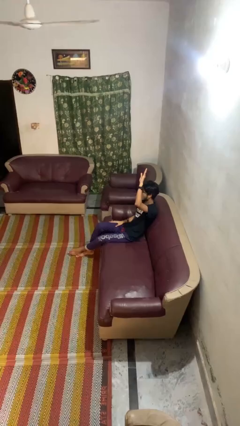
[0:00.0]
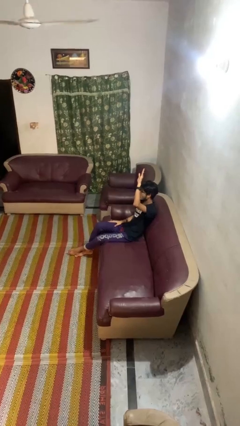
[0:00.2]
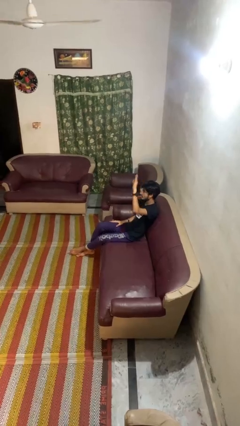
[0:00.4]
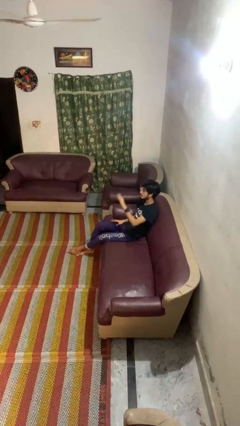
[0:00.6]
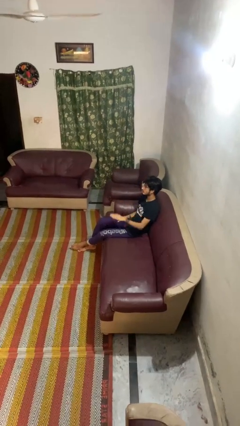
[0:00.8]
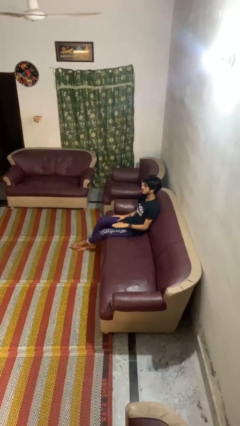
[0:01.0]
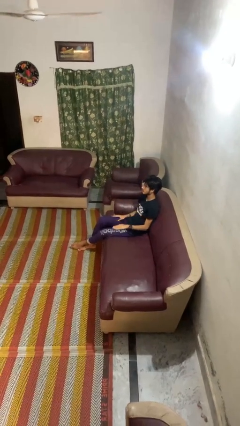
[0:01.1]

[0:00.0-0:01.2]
person gestures lower hand

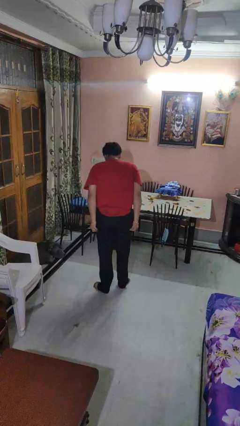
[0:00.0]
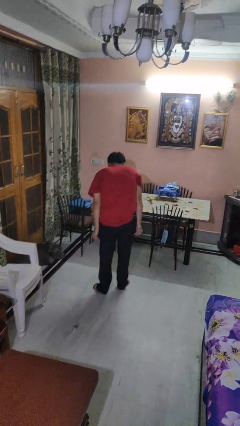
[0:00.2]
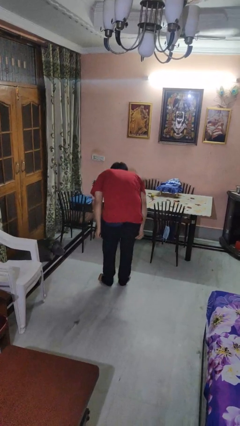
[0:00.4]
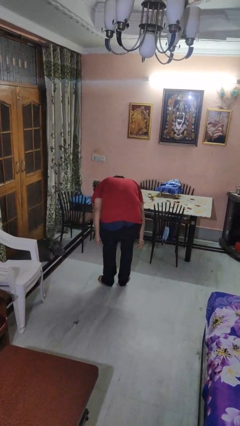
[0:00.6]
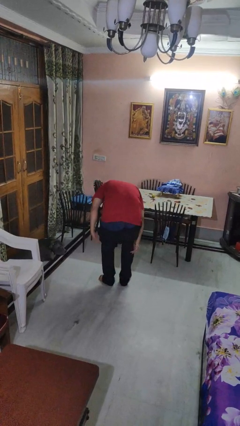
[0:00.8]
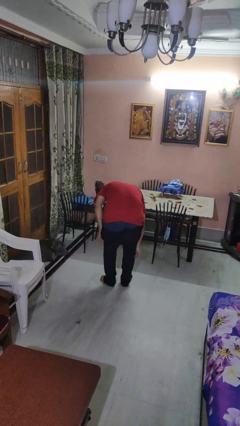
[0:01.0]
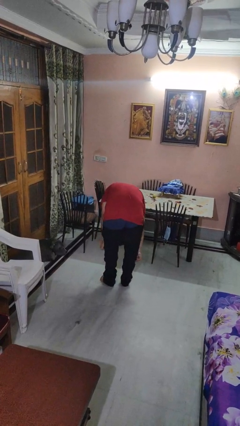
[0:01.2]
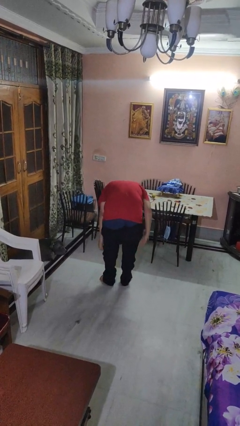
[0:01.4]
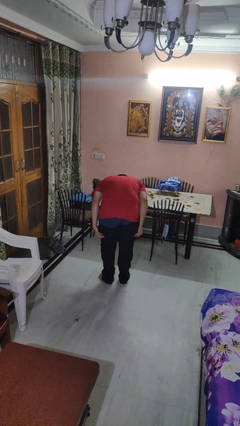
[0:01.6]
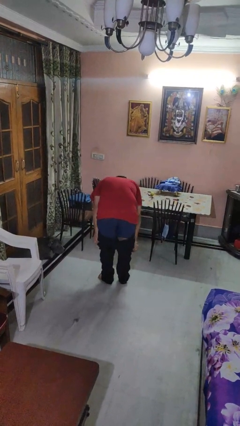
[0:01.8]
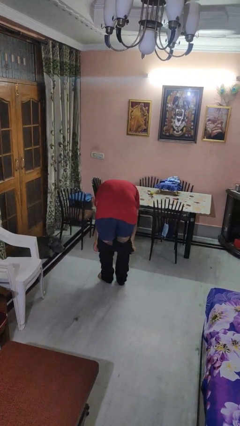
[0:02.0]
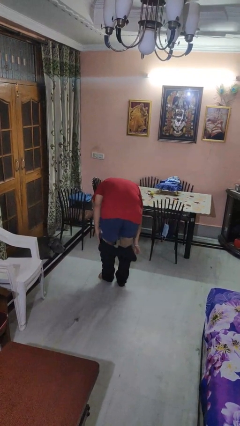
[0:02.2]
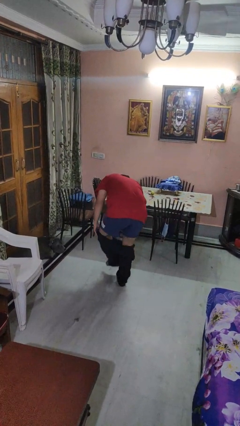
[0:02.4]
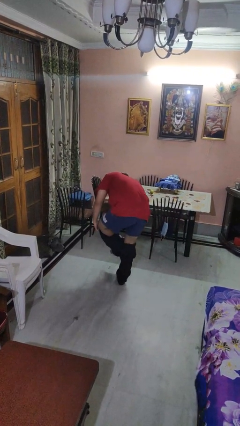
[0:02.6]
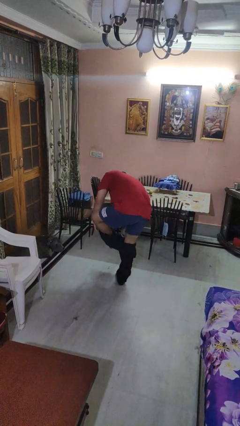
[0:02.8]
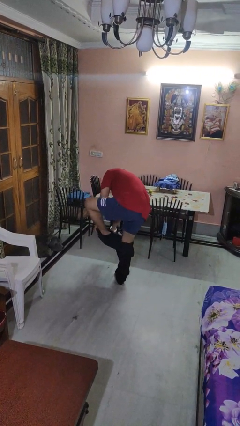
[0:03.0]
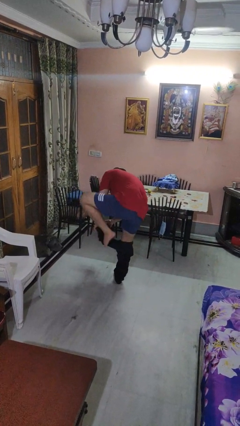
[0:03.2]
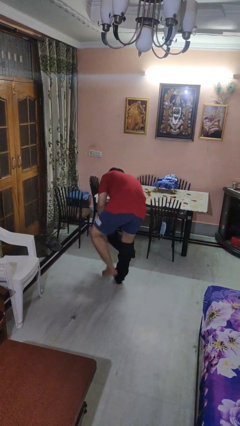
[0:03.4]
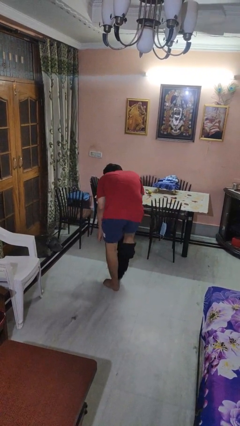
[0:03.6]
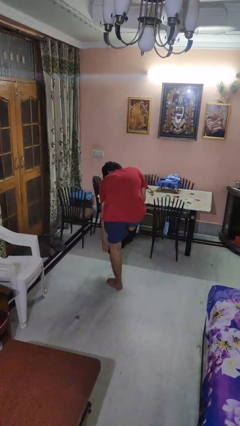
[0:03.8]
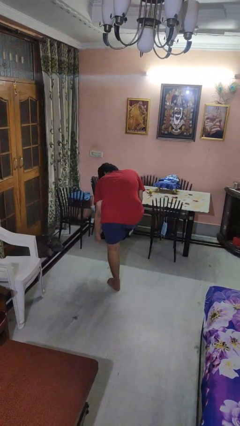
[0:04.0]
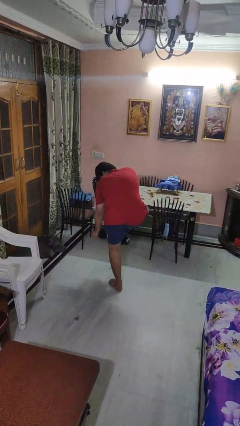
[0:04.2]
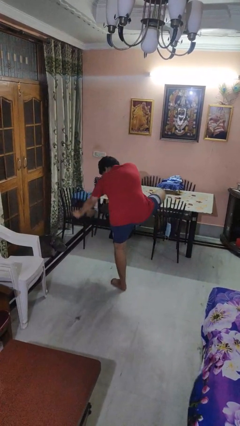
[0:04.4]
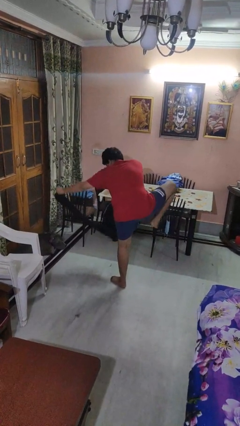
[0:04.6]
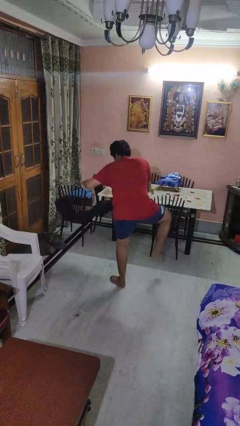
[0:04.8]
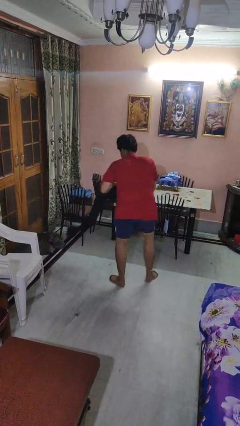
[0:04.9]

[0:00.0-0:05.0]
person takes off pants

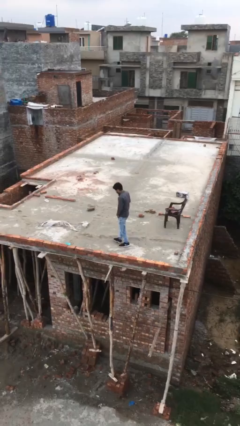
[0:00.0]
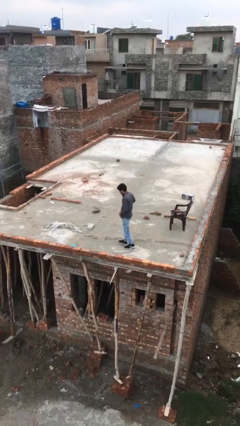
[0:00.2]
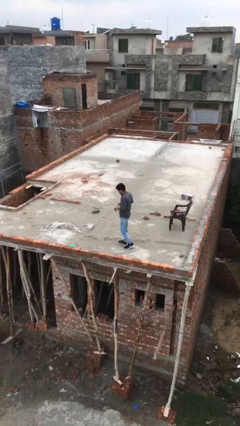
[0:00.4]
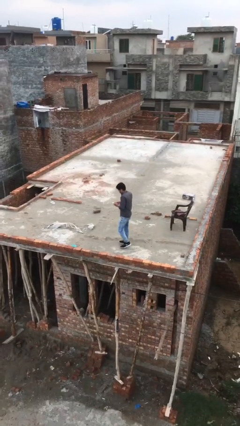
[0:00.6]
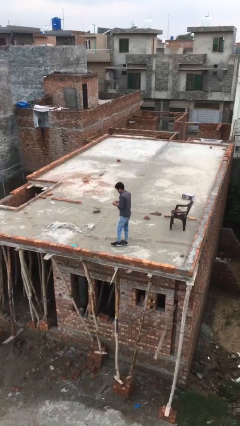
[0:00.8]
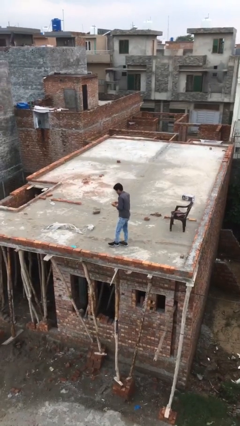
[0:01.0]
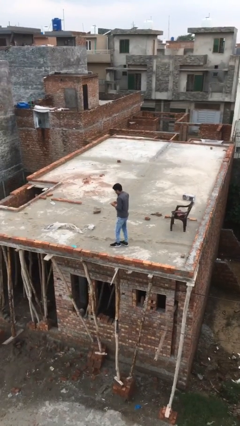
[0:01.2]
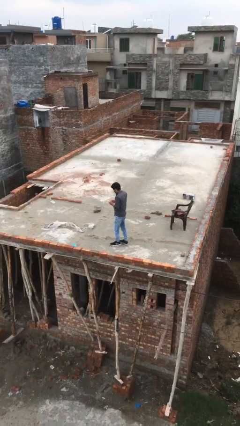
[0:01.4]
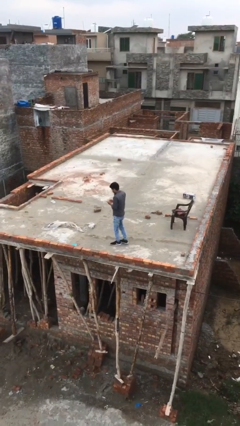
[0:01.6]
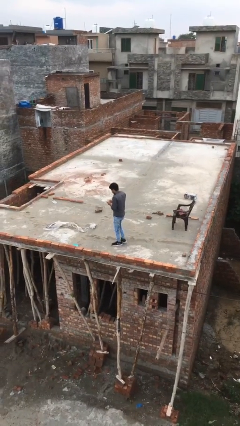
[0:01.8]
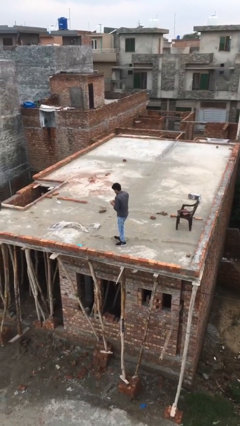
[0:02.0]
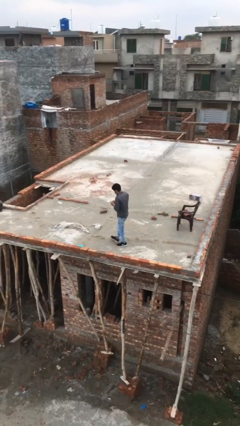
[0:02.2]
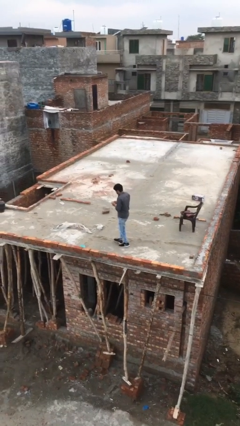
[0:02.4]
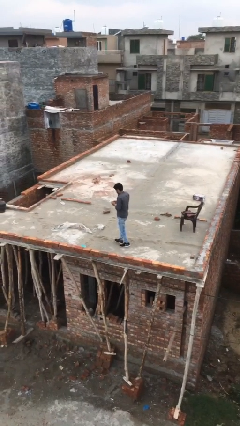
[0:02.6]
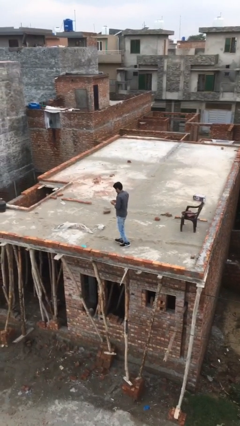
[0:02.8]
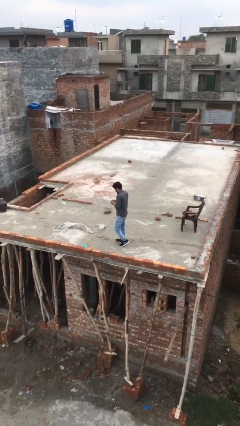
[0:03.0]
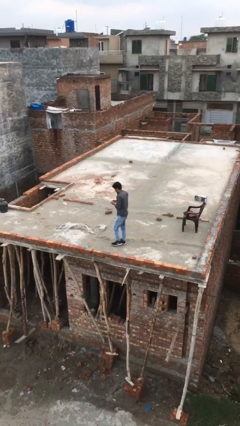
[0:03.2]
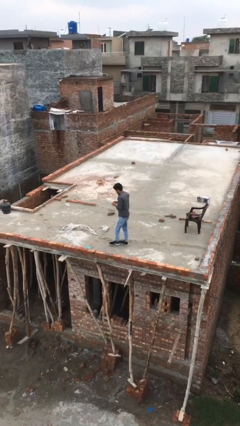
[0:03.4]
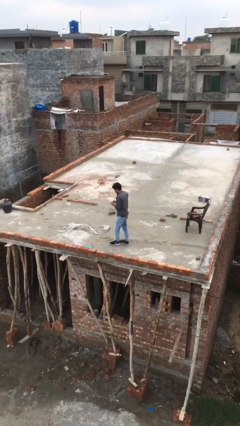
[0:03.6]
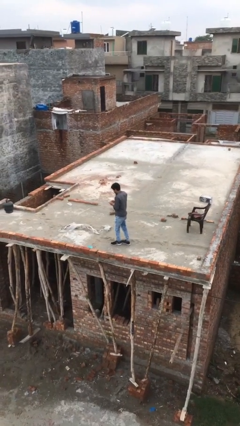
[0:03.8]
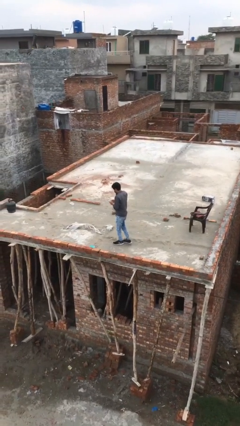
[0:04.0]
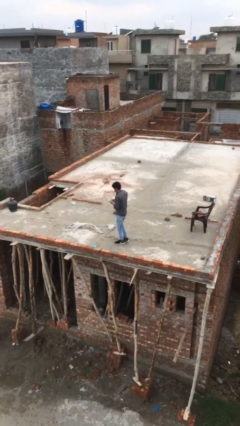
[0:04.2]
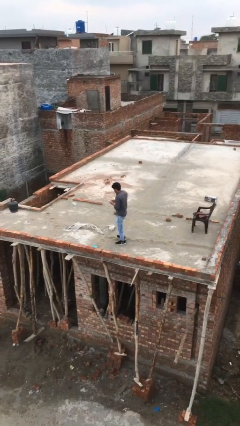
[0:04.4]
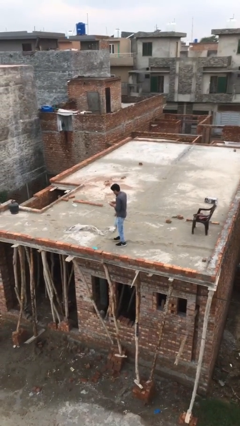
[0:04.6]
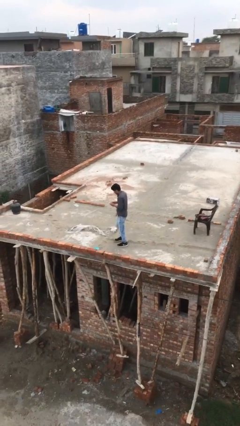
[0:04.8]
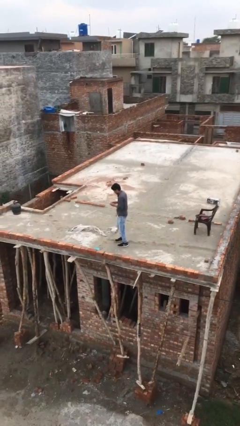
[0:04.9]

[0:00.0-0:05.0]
person texts on phone

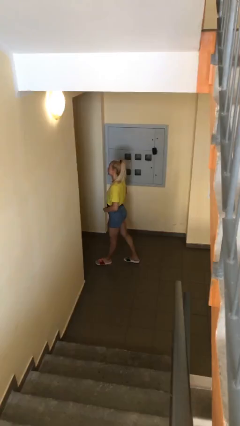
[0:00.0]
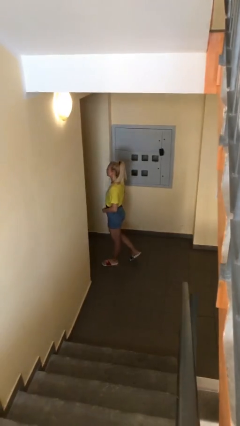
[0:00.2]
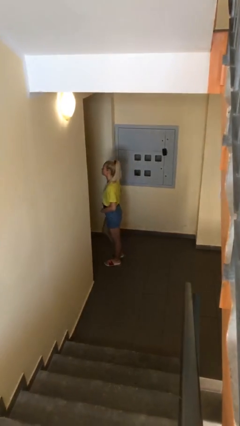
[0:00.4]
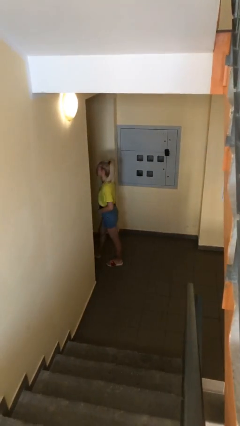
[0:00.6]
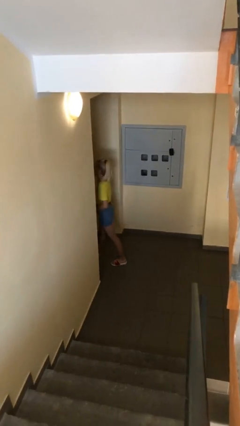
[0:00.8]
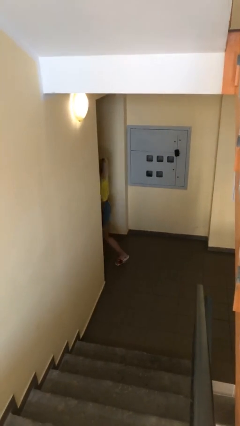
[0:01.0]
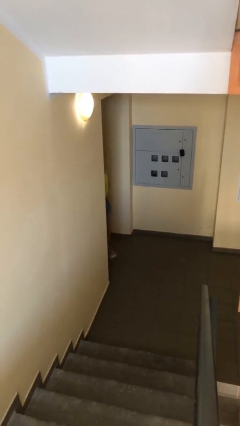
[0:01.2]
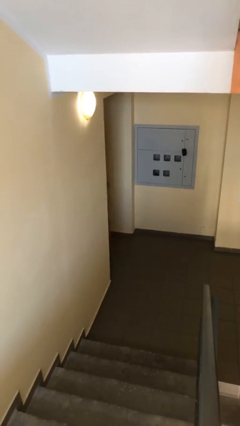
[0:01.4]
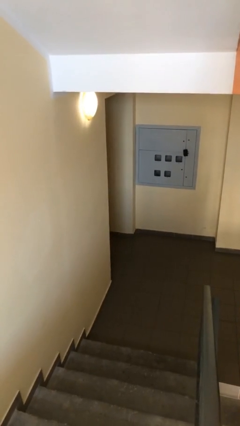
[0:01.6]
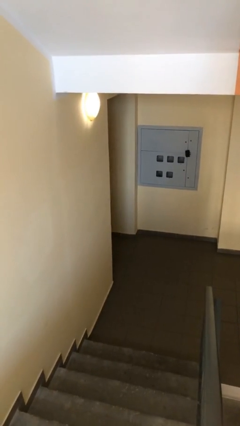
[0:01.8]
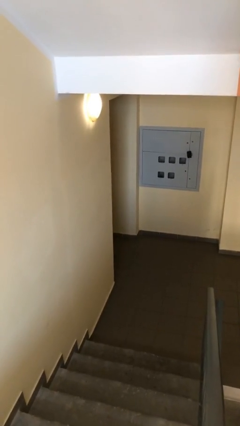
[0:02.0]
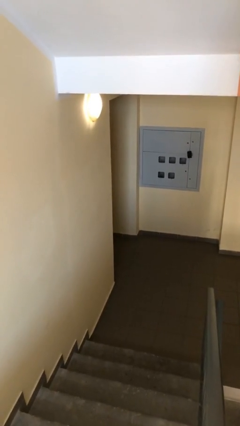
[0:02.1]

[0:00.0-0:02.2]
person exits scene through structure

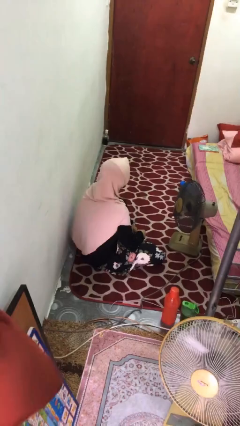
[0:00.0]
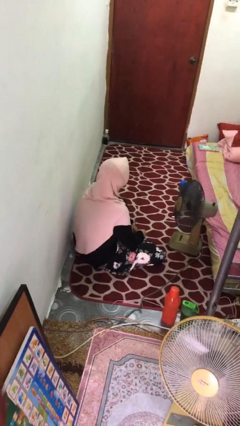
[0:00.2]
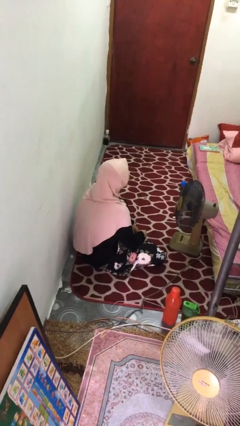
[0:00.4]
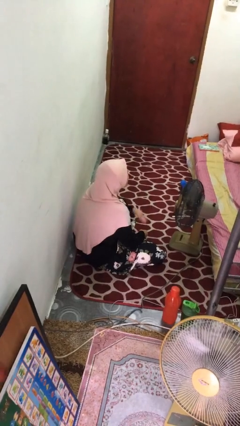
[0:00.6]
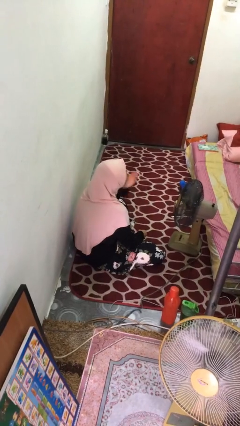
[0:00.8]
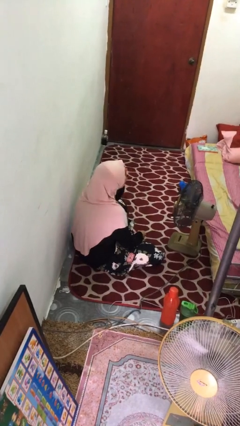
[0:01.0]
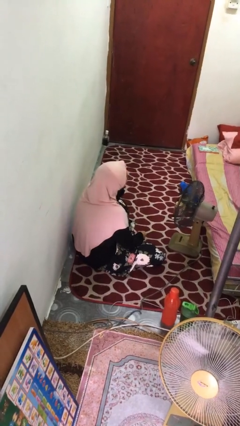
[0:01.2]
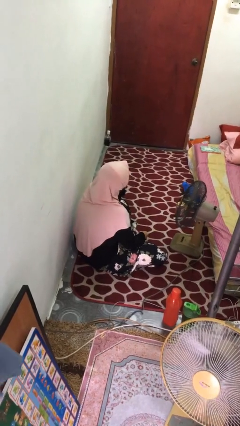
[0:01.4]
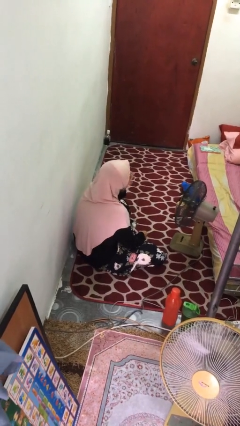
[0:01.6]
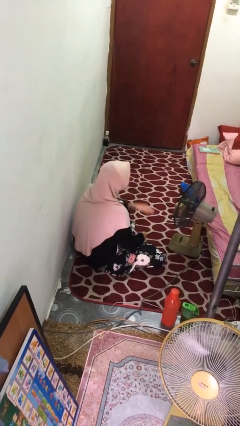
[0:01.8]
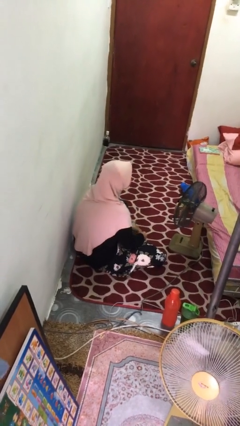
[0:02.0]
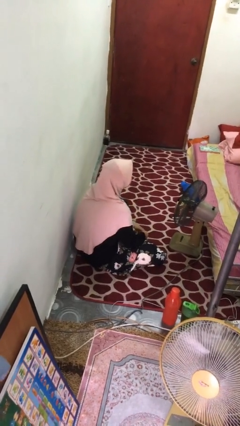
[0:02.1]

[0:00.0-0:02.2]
person yawns

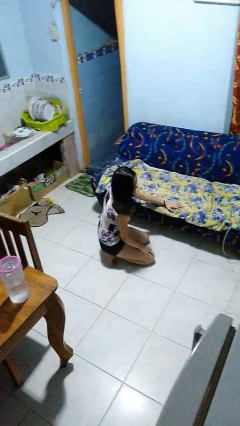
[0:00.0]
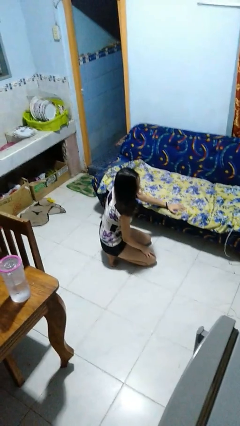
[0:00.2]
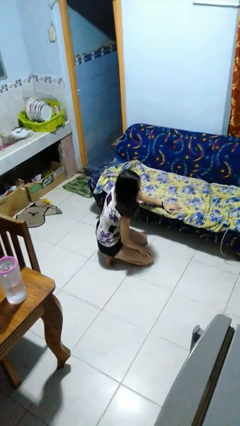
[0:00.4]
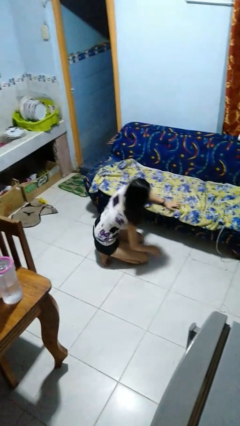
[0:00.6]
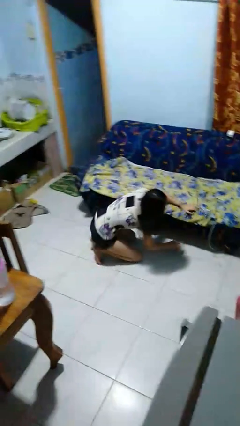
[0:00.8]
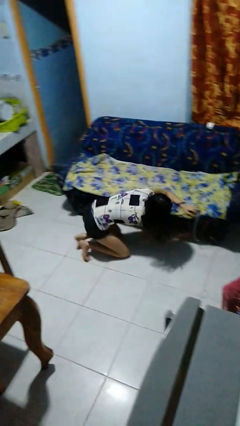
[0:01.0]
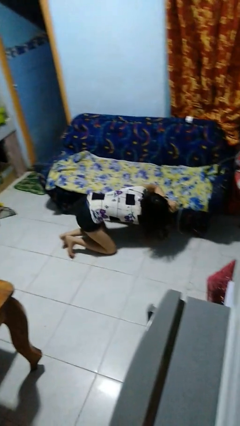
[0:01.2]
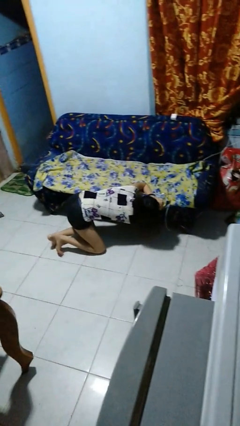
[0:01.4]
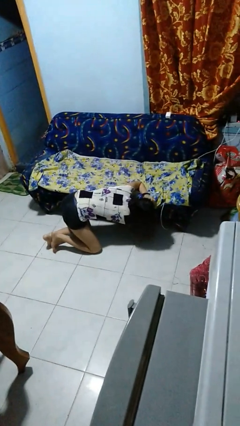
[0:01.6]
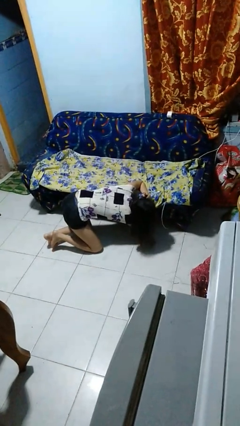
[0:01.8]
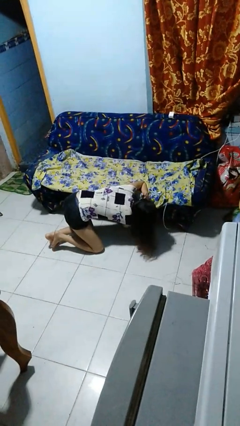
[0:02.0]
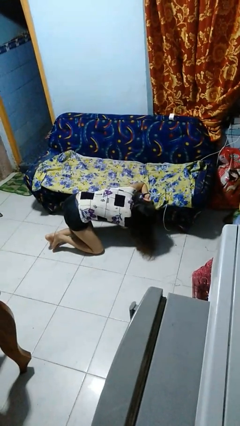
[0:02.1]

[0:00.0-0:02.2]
person searches under couch
